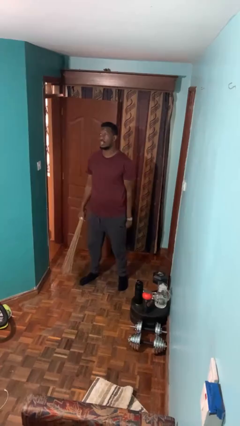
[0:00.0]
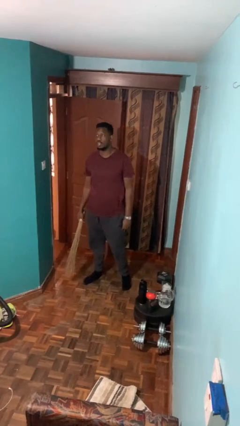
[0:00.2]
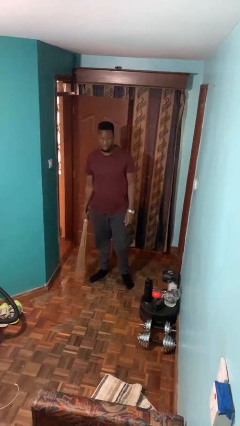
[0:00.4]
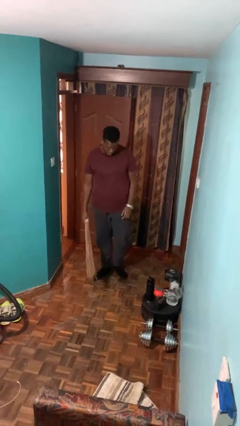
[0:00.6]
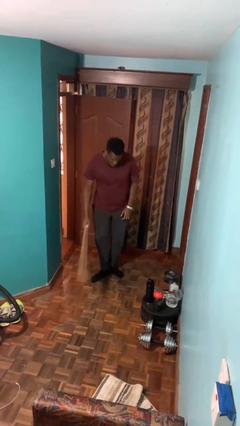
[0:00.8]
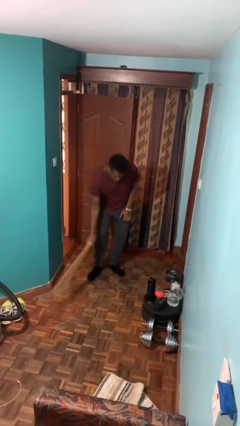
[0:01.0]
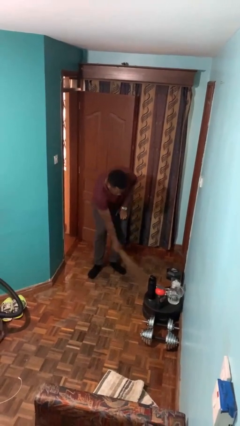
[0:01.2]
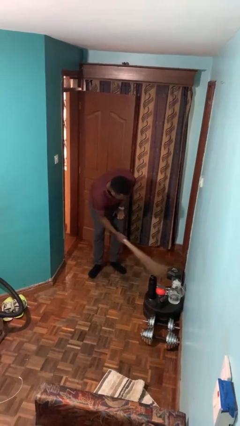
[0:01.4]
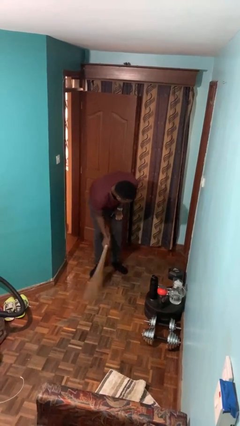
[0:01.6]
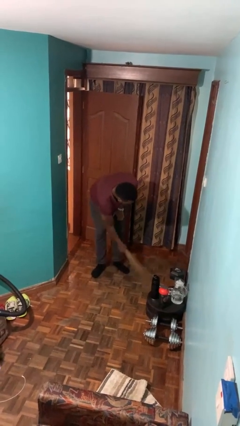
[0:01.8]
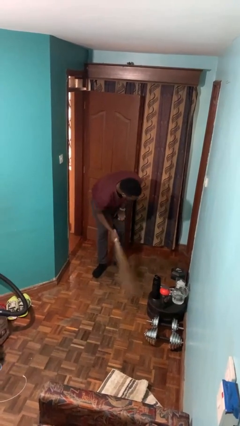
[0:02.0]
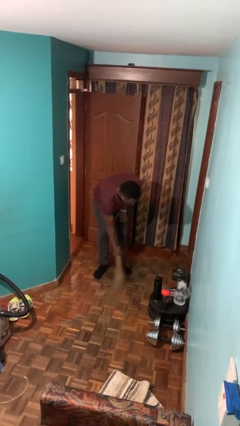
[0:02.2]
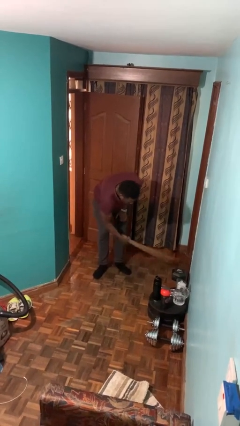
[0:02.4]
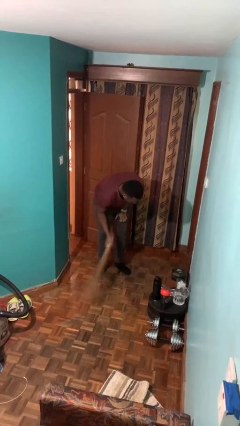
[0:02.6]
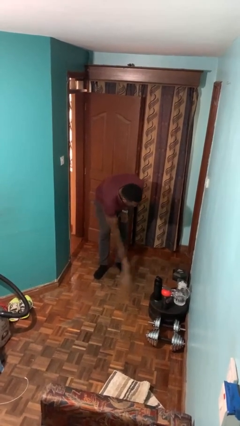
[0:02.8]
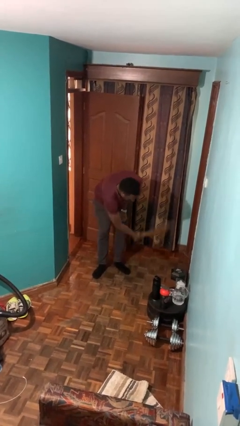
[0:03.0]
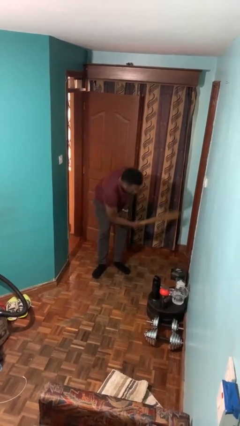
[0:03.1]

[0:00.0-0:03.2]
person sweeps floor

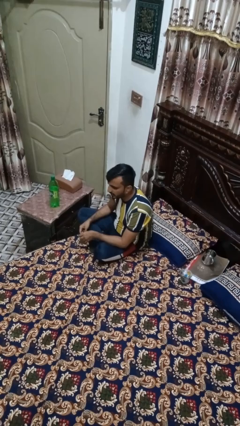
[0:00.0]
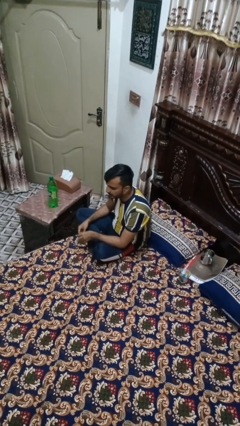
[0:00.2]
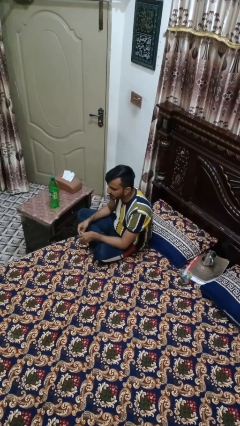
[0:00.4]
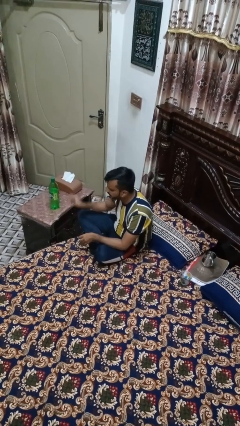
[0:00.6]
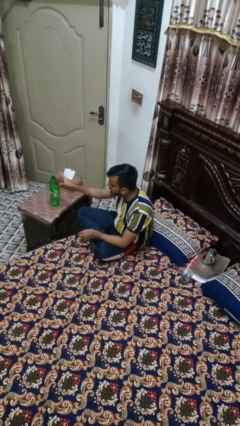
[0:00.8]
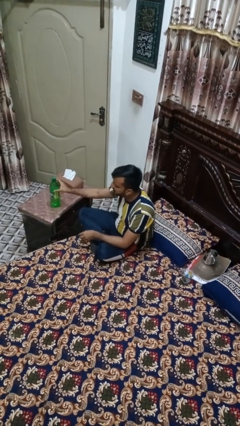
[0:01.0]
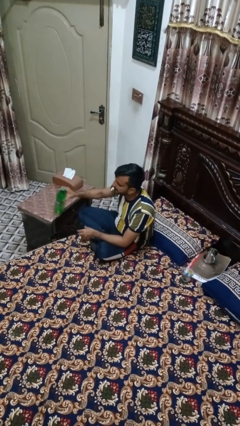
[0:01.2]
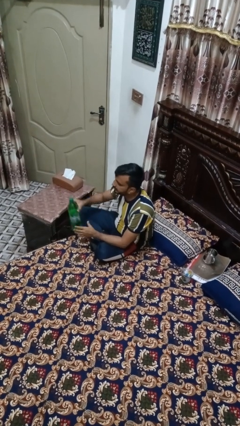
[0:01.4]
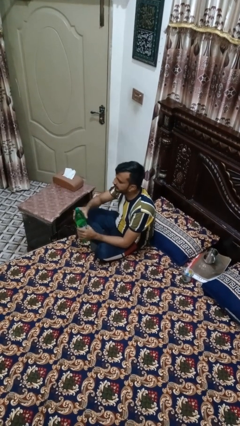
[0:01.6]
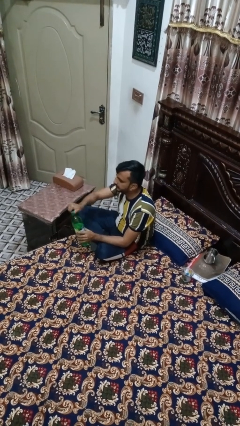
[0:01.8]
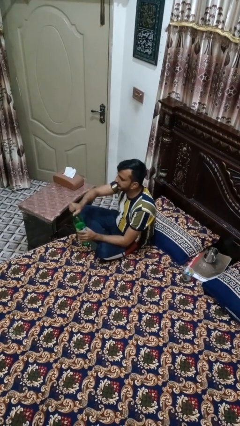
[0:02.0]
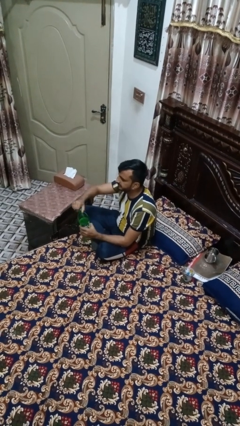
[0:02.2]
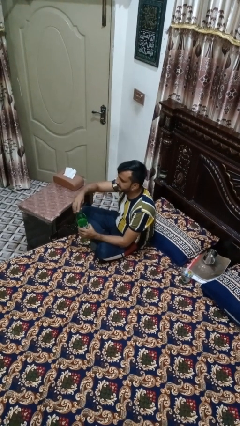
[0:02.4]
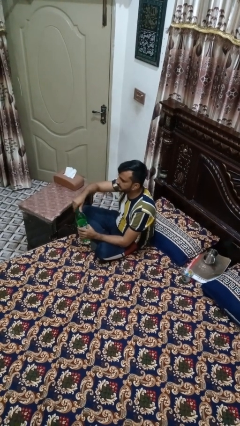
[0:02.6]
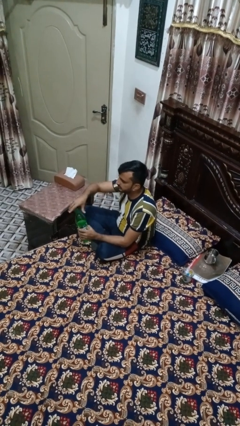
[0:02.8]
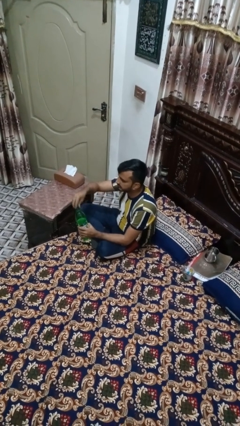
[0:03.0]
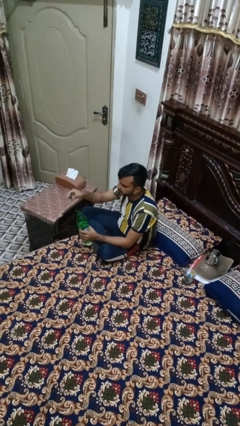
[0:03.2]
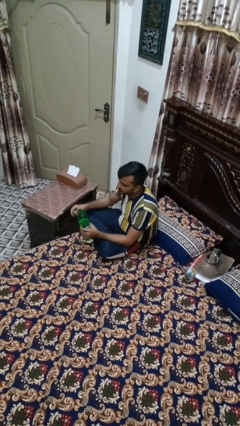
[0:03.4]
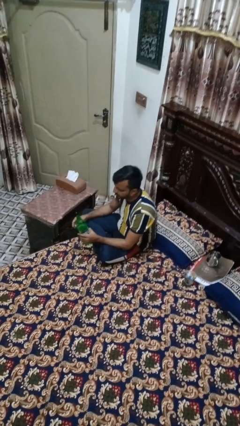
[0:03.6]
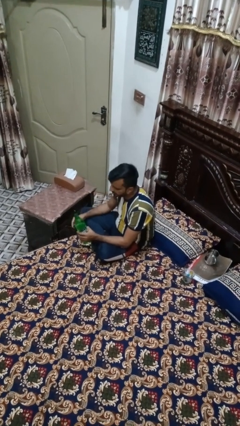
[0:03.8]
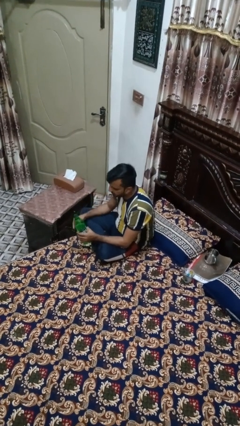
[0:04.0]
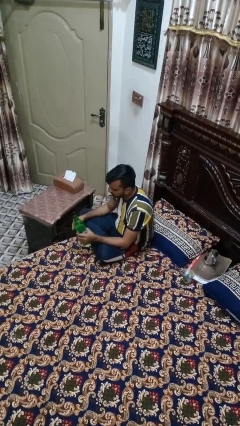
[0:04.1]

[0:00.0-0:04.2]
person unscrews lid from bottle

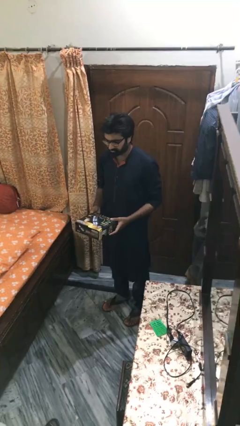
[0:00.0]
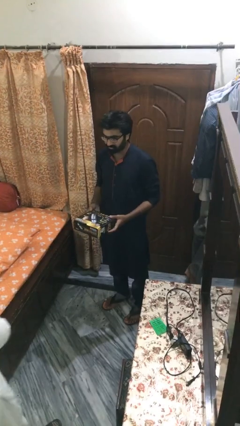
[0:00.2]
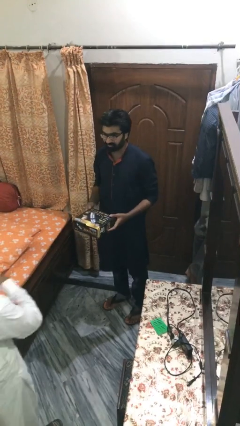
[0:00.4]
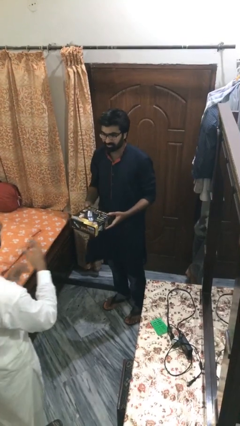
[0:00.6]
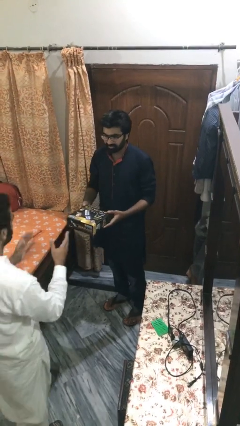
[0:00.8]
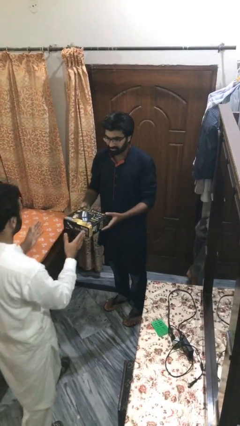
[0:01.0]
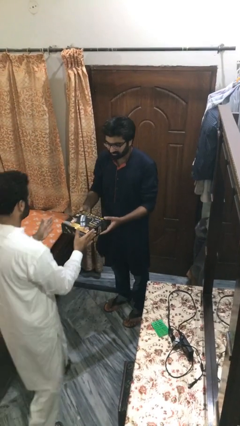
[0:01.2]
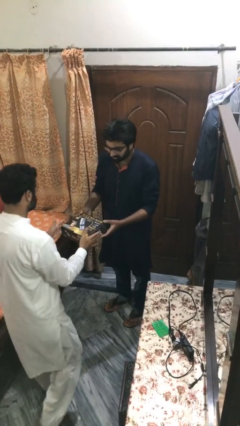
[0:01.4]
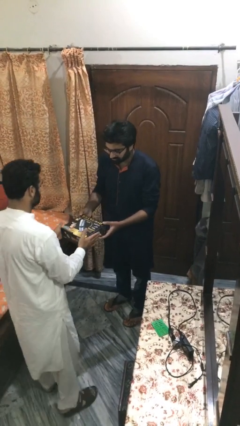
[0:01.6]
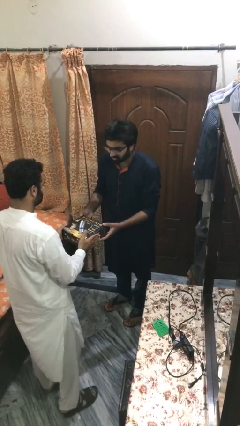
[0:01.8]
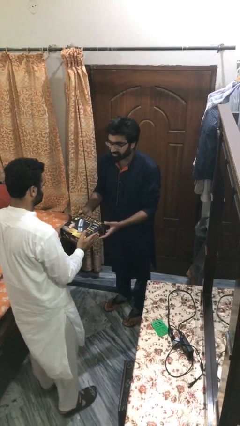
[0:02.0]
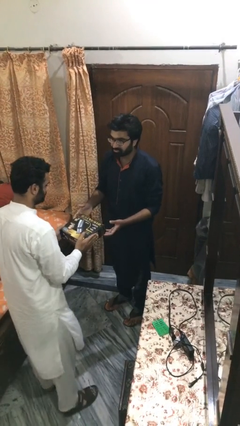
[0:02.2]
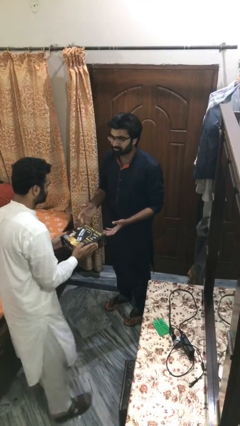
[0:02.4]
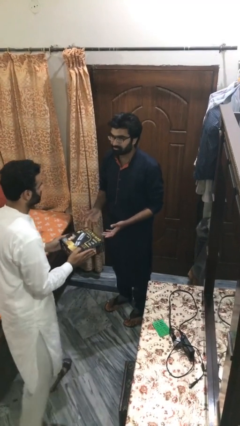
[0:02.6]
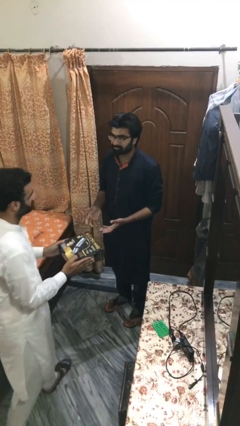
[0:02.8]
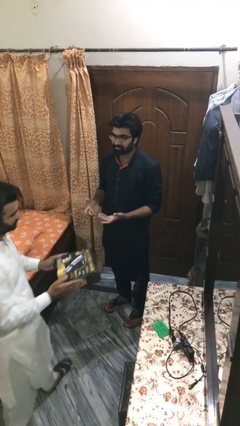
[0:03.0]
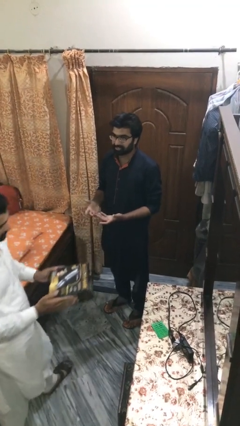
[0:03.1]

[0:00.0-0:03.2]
person transfers object to person

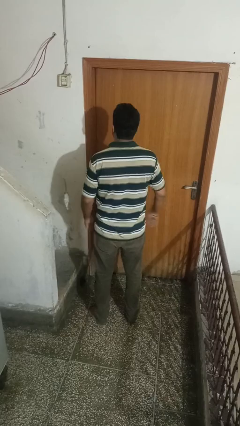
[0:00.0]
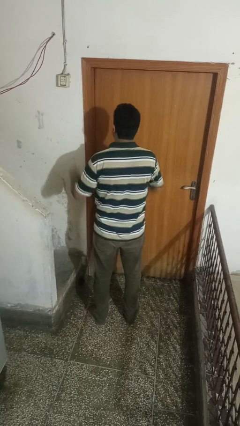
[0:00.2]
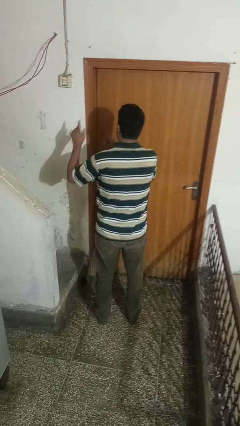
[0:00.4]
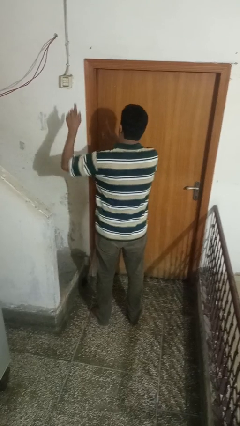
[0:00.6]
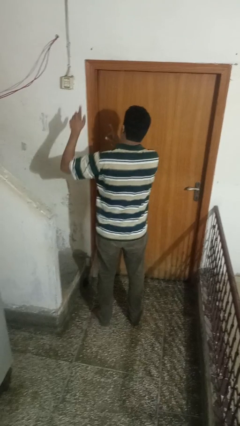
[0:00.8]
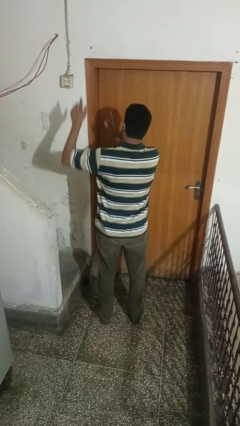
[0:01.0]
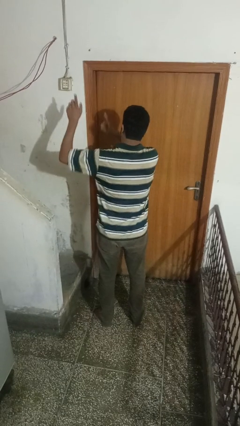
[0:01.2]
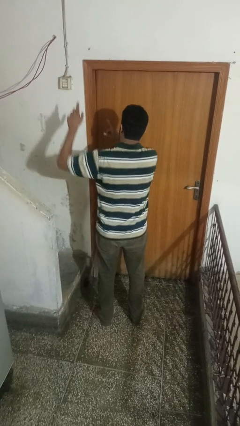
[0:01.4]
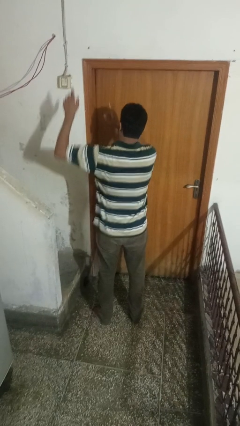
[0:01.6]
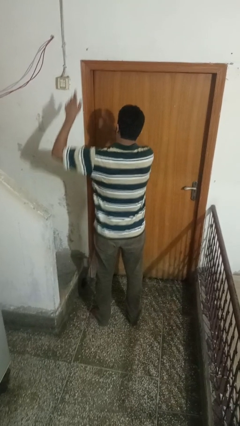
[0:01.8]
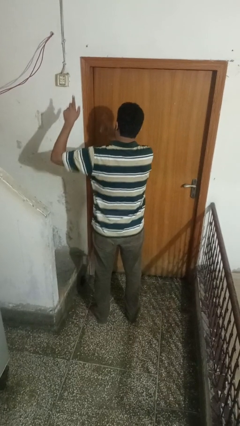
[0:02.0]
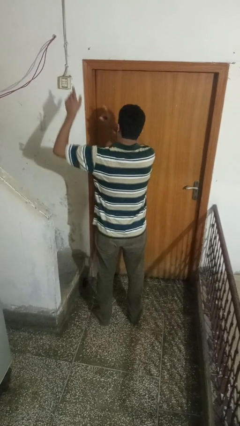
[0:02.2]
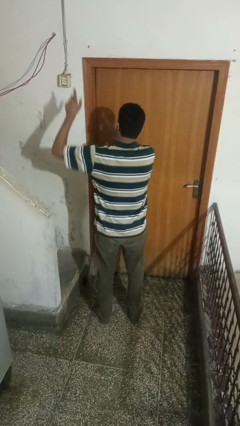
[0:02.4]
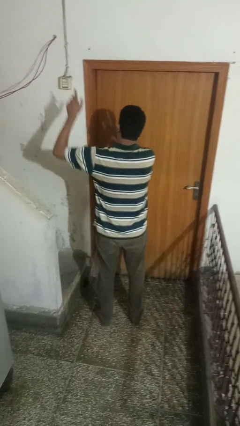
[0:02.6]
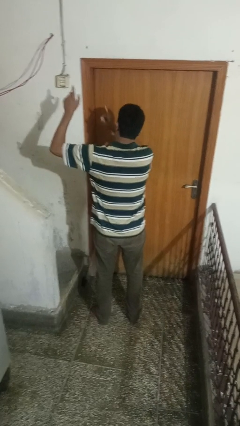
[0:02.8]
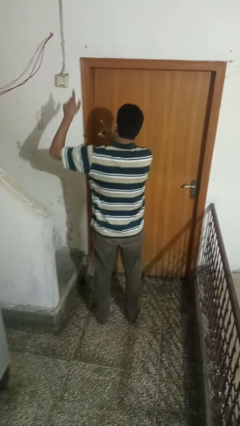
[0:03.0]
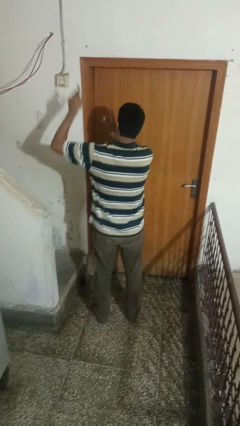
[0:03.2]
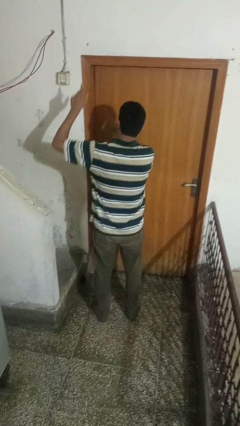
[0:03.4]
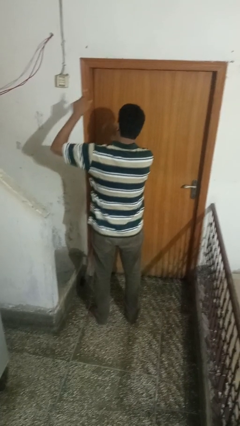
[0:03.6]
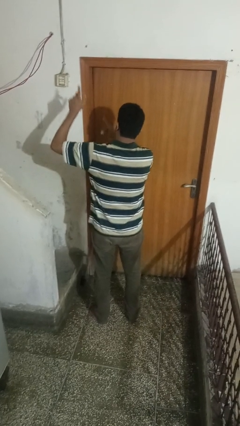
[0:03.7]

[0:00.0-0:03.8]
person dances in place

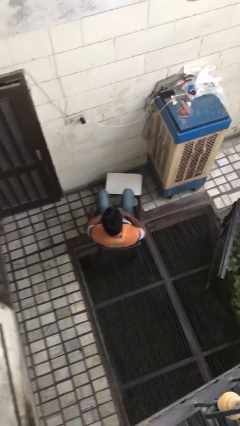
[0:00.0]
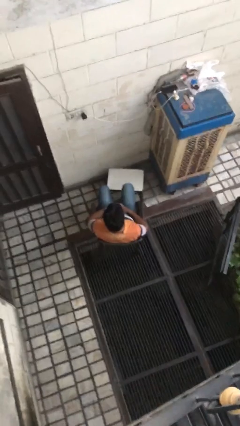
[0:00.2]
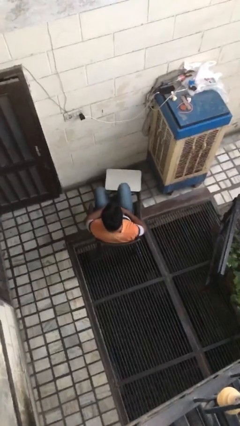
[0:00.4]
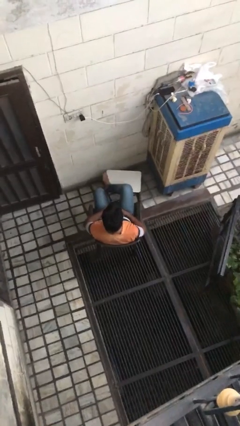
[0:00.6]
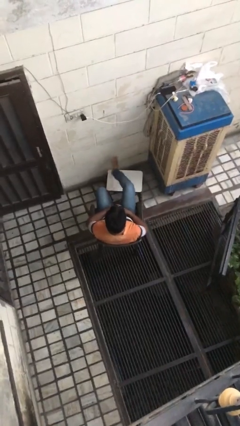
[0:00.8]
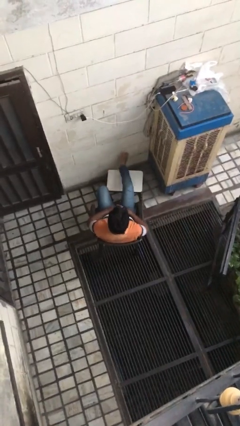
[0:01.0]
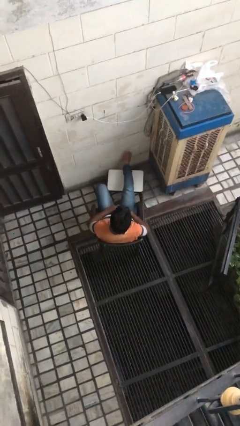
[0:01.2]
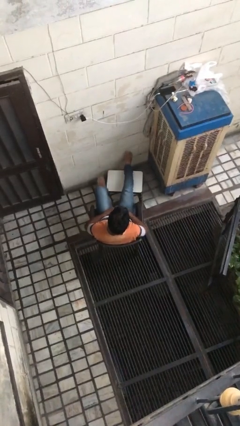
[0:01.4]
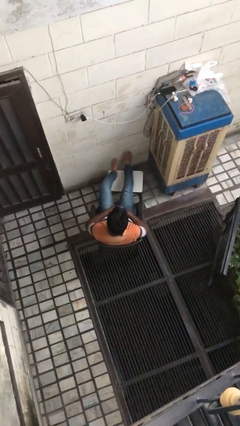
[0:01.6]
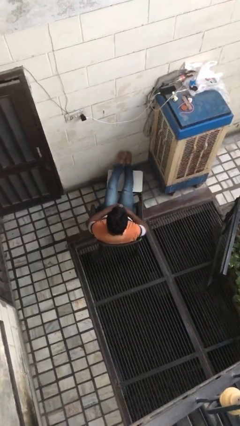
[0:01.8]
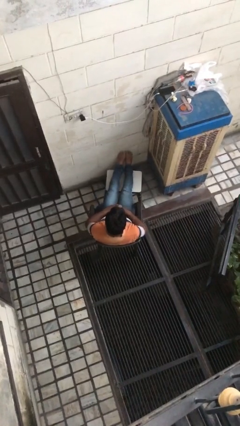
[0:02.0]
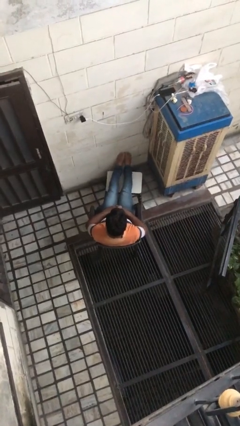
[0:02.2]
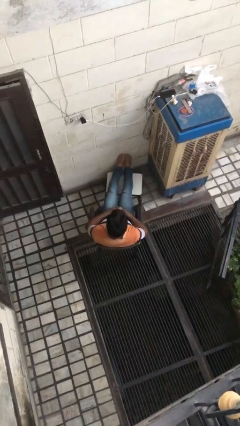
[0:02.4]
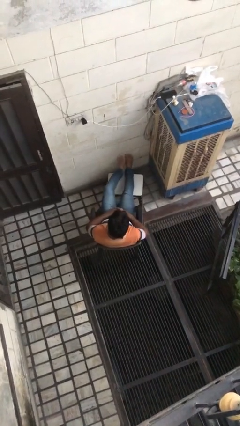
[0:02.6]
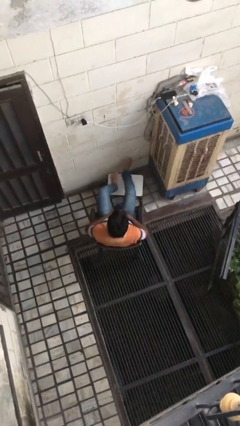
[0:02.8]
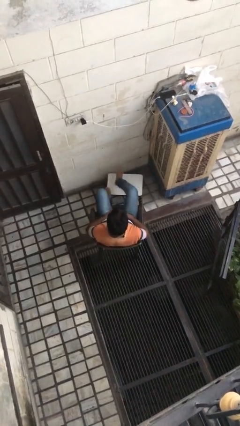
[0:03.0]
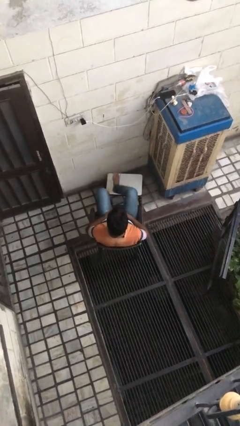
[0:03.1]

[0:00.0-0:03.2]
person puts feet up
